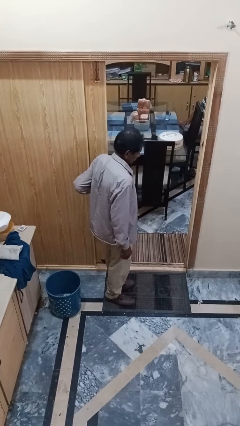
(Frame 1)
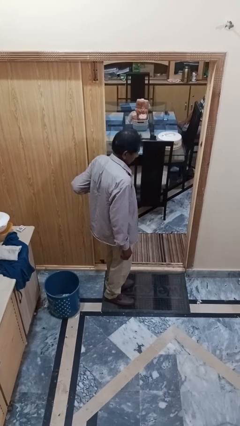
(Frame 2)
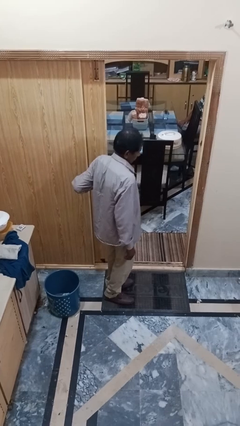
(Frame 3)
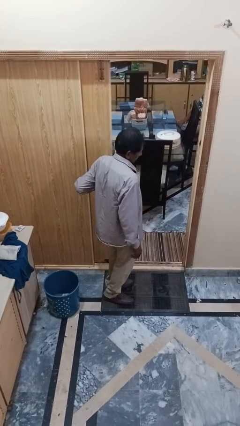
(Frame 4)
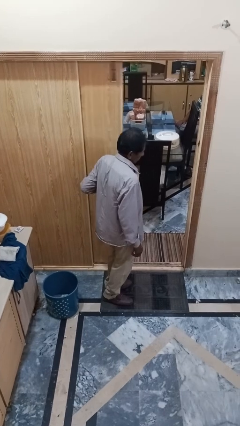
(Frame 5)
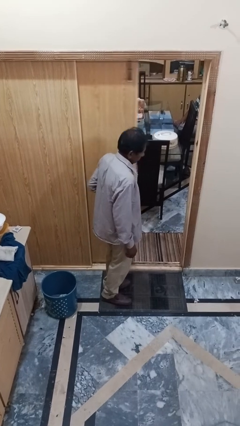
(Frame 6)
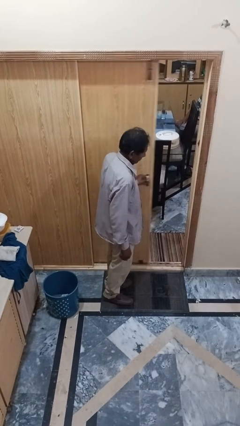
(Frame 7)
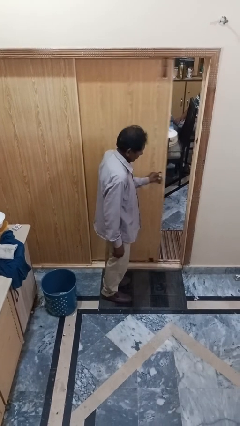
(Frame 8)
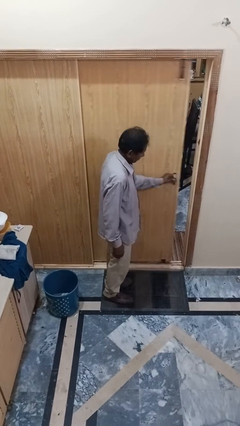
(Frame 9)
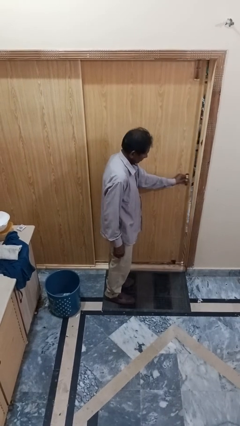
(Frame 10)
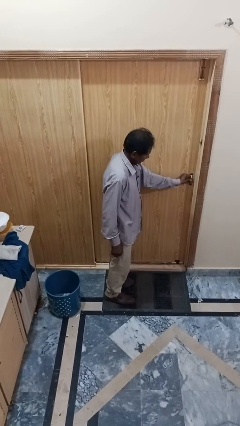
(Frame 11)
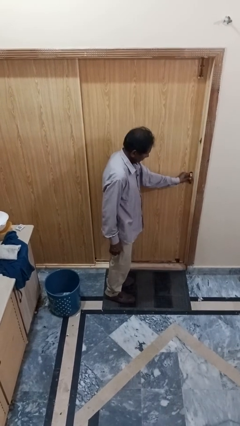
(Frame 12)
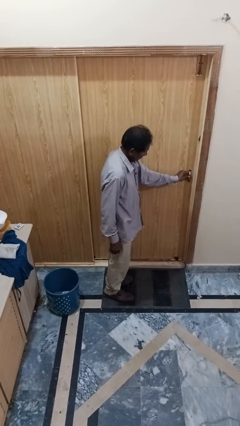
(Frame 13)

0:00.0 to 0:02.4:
person closes sliding door

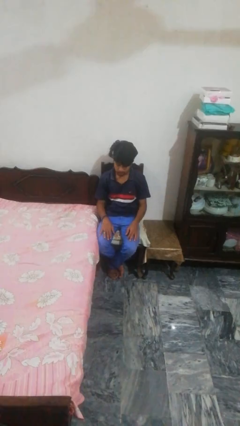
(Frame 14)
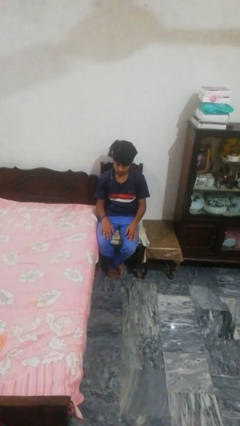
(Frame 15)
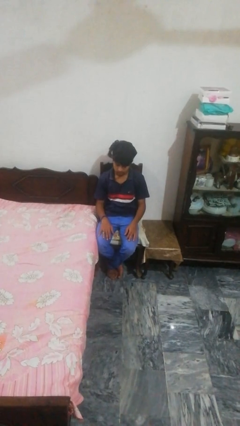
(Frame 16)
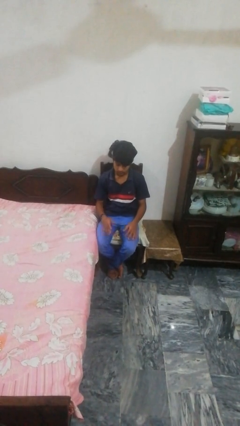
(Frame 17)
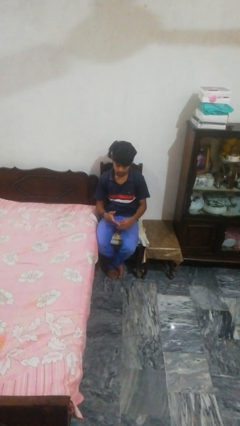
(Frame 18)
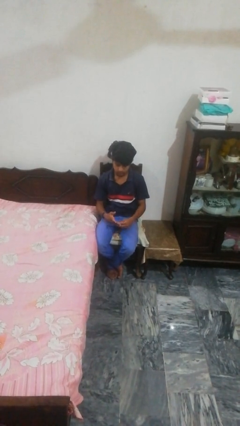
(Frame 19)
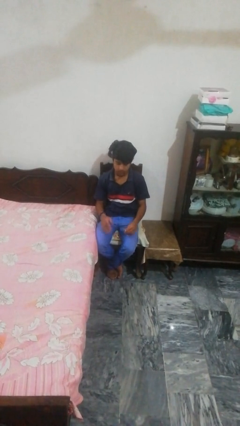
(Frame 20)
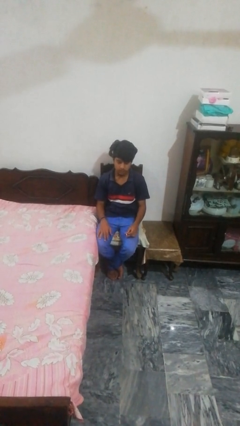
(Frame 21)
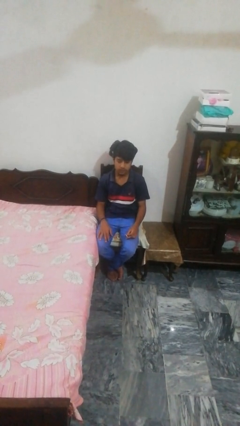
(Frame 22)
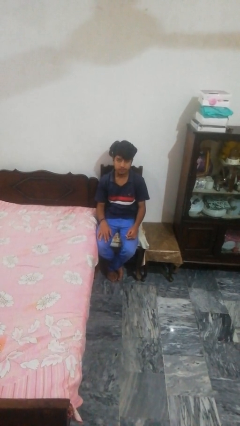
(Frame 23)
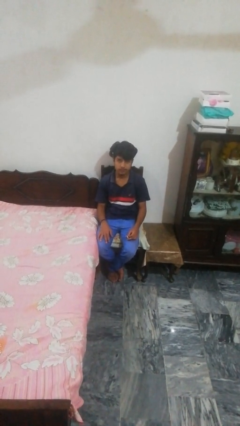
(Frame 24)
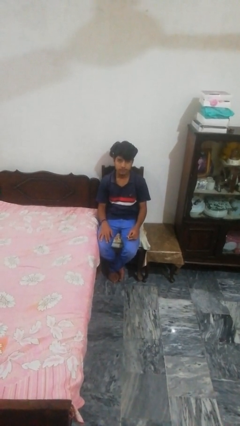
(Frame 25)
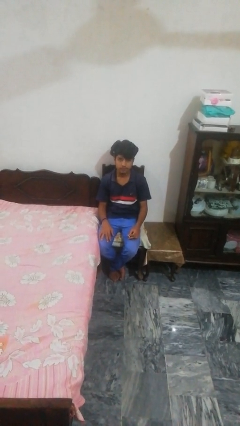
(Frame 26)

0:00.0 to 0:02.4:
person takes off ring

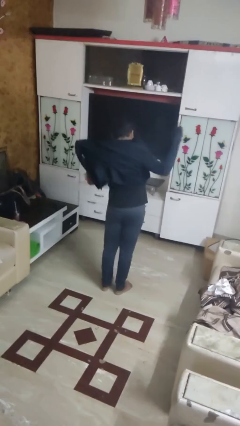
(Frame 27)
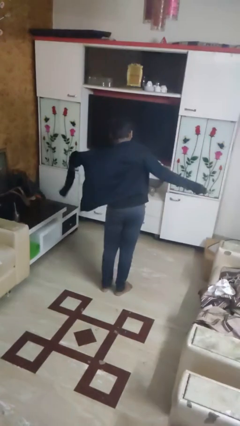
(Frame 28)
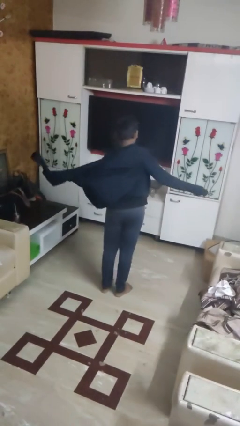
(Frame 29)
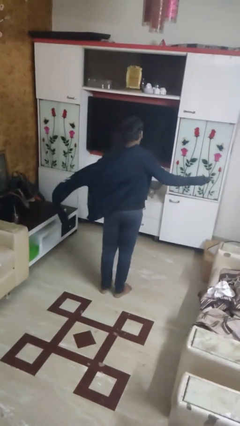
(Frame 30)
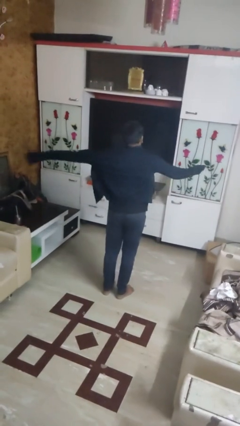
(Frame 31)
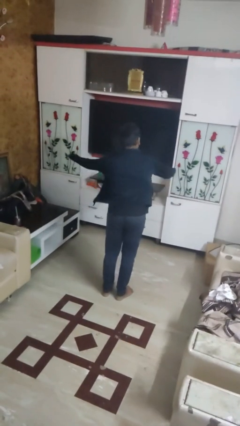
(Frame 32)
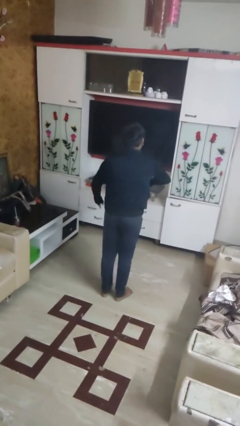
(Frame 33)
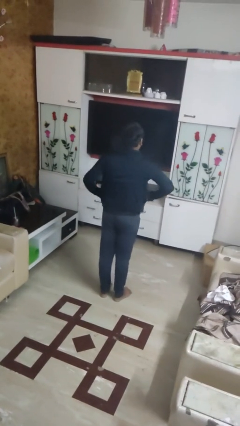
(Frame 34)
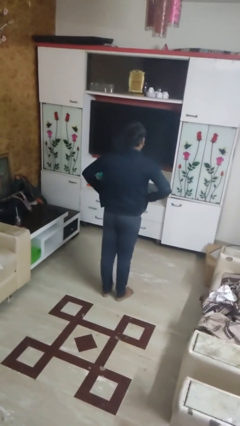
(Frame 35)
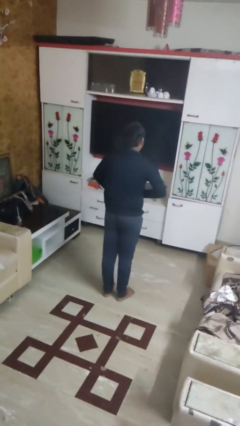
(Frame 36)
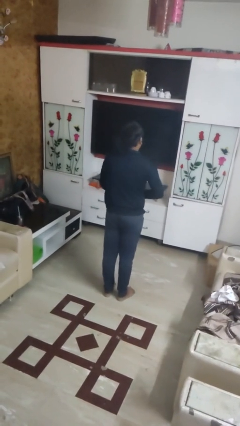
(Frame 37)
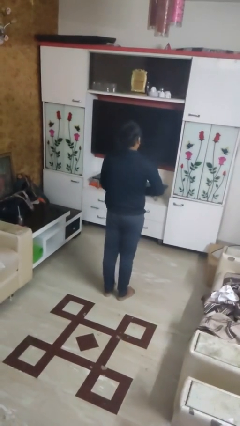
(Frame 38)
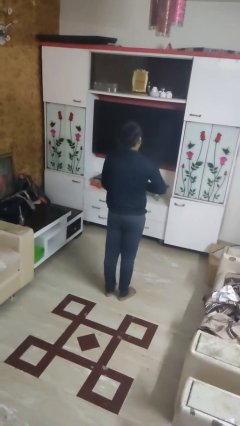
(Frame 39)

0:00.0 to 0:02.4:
person puts on jacket

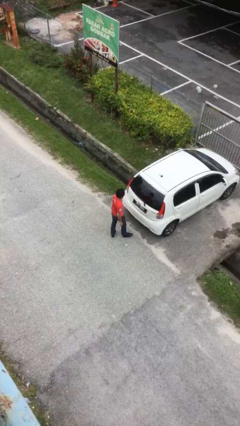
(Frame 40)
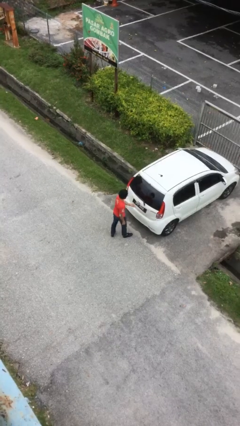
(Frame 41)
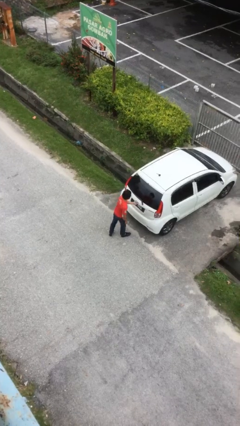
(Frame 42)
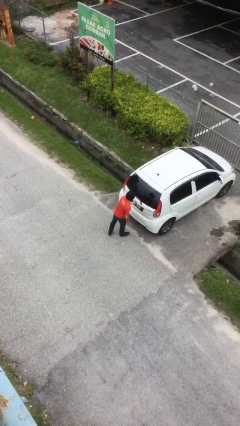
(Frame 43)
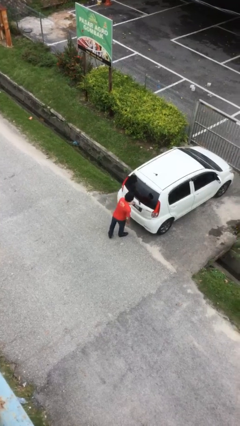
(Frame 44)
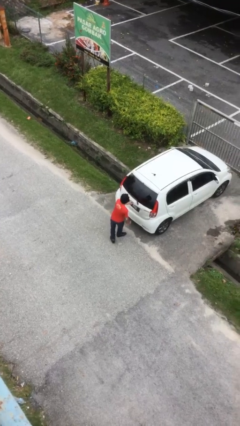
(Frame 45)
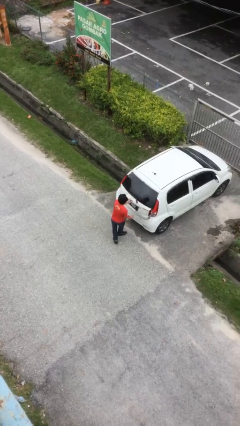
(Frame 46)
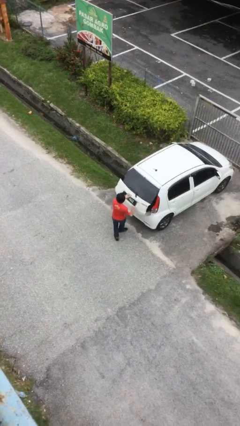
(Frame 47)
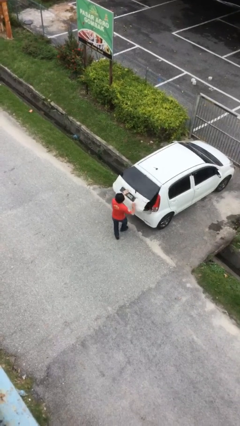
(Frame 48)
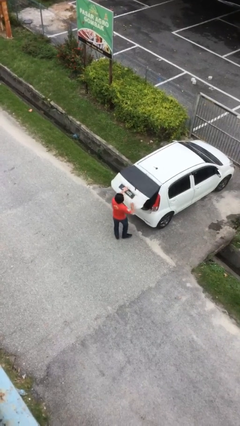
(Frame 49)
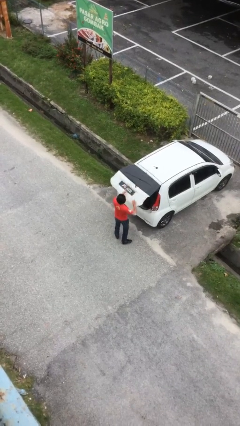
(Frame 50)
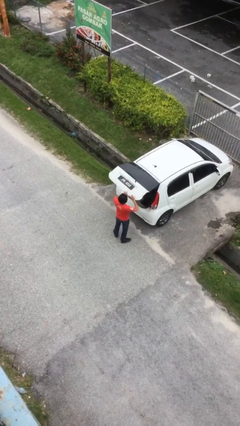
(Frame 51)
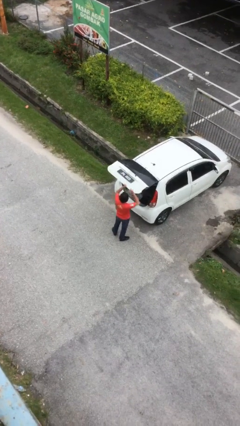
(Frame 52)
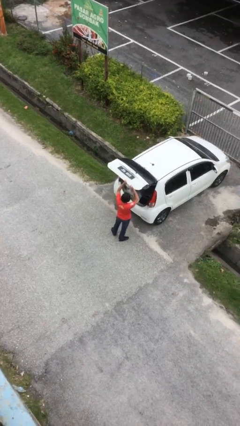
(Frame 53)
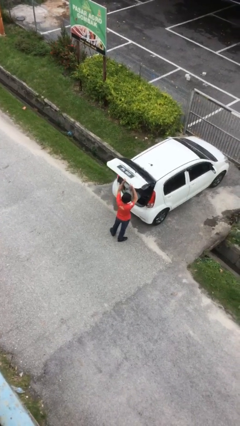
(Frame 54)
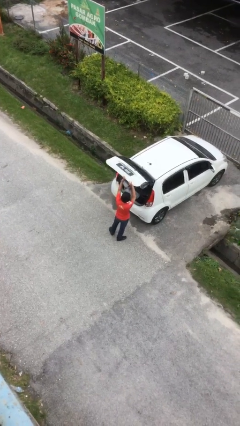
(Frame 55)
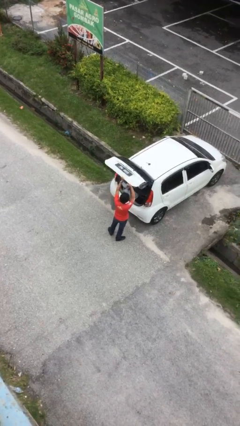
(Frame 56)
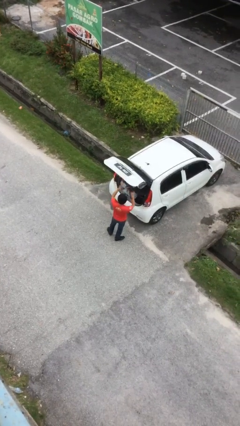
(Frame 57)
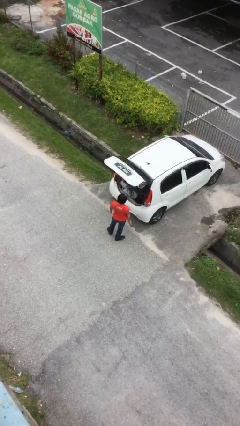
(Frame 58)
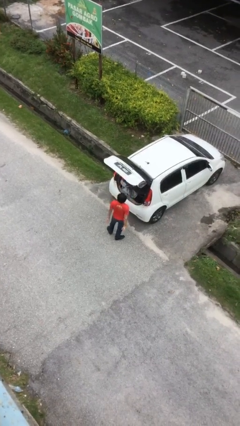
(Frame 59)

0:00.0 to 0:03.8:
person opens car trunk

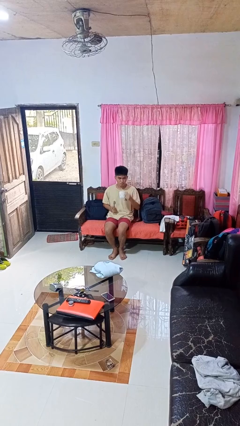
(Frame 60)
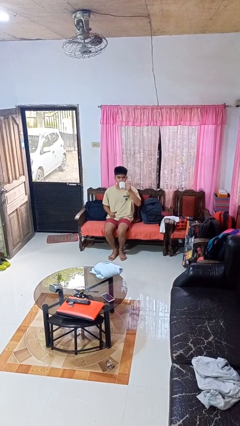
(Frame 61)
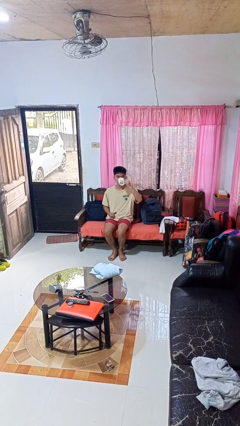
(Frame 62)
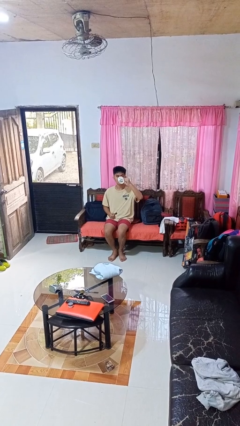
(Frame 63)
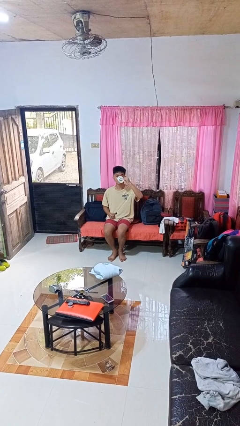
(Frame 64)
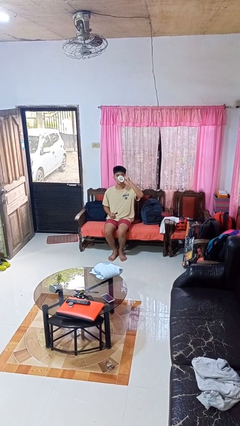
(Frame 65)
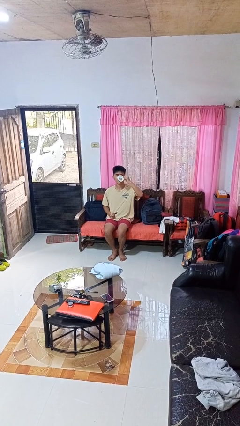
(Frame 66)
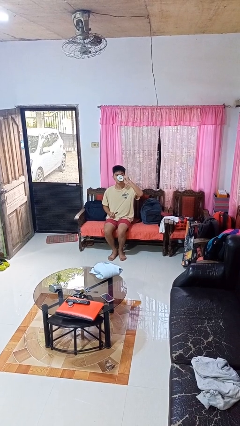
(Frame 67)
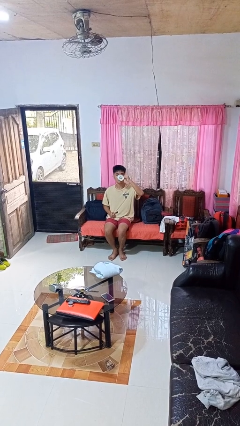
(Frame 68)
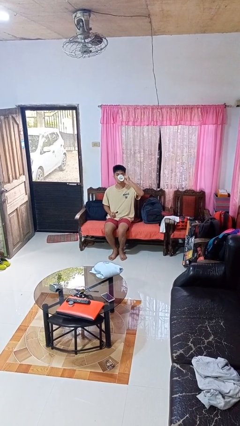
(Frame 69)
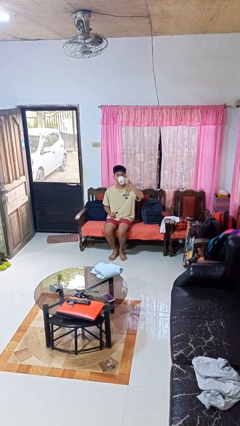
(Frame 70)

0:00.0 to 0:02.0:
person drinks from mug

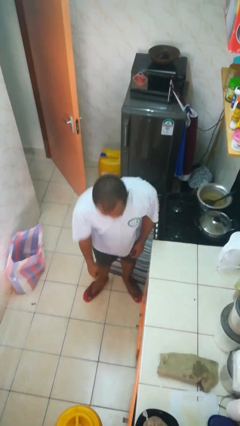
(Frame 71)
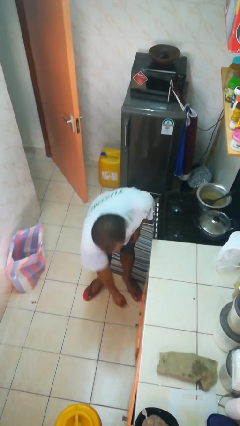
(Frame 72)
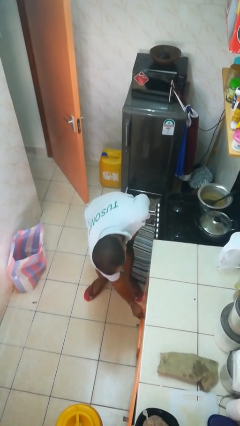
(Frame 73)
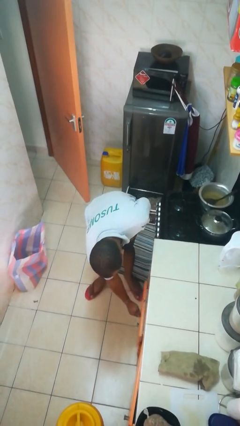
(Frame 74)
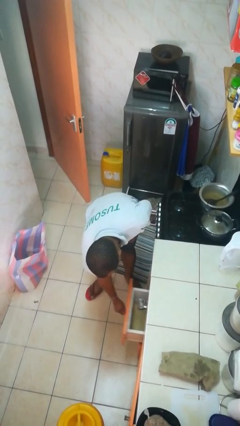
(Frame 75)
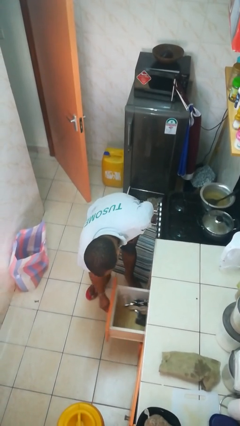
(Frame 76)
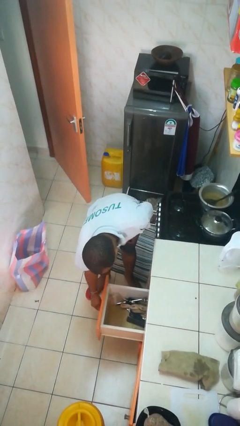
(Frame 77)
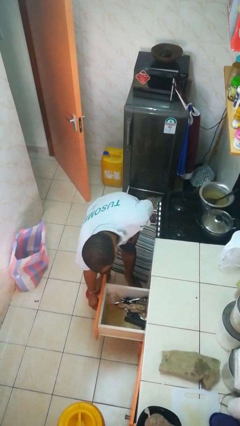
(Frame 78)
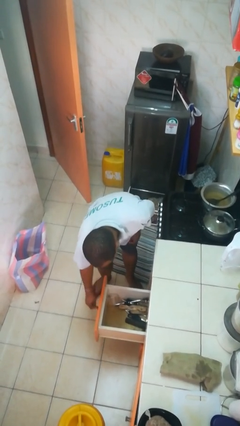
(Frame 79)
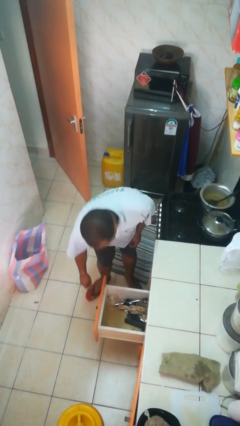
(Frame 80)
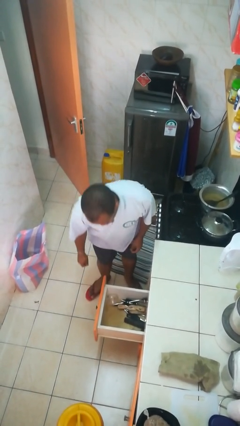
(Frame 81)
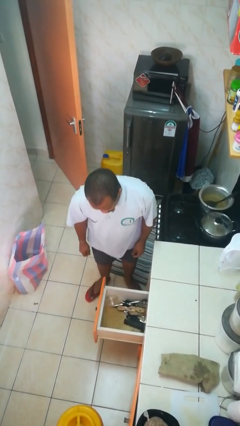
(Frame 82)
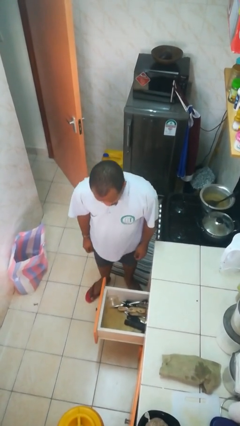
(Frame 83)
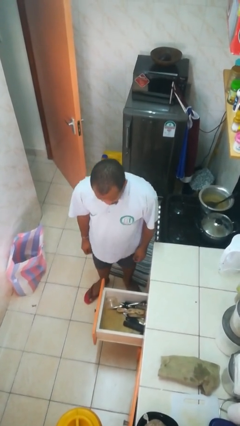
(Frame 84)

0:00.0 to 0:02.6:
person opens kitchen drawer

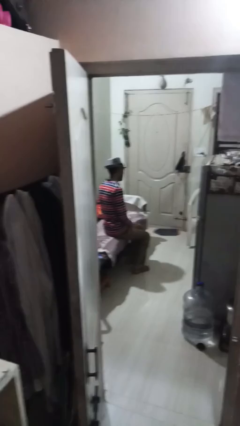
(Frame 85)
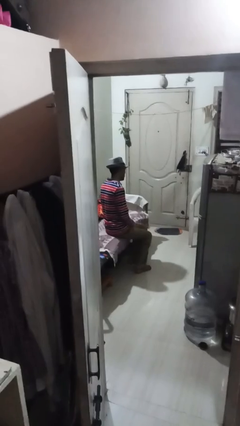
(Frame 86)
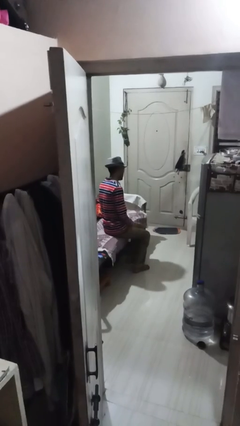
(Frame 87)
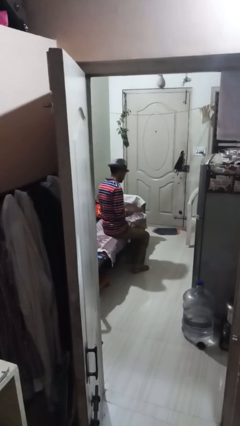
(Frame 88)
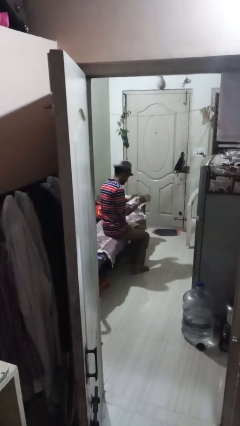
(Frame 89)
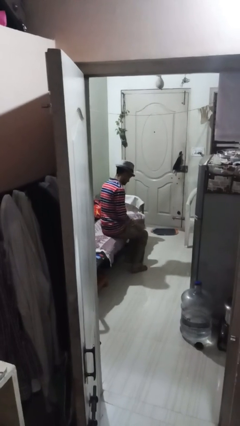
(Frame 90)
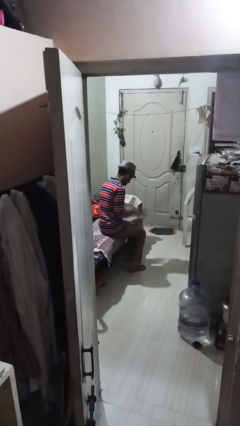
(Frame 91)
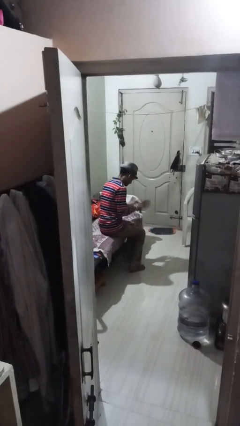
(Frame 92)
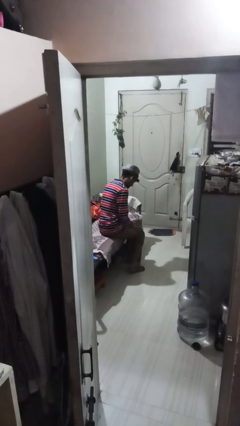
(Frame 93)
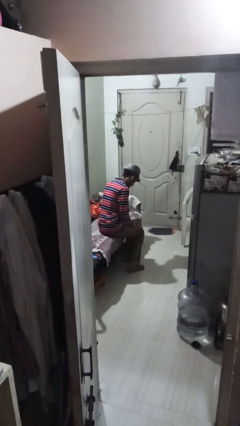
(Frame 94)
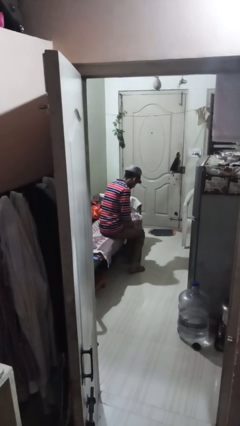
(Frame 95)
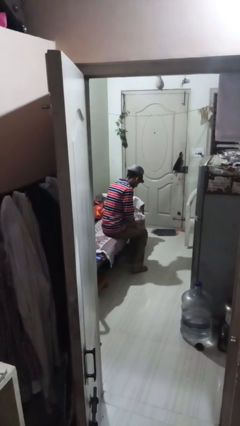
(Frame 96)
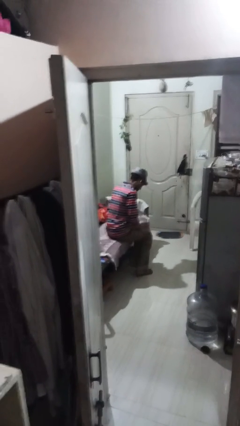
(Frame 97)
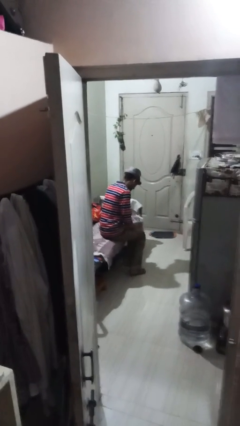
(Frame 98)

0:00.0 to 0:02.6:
person slaps hands on thighs
